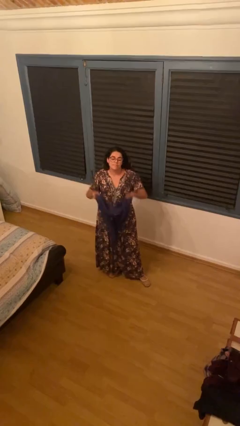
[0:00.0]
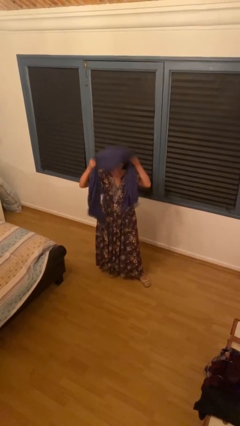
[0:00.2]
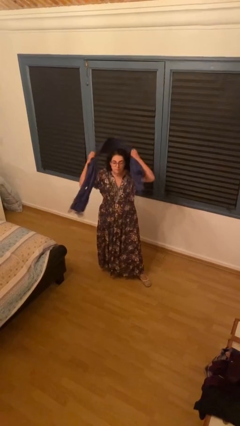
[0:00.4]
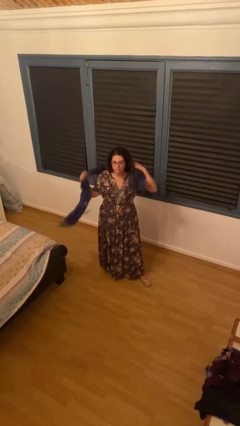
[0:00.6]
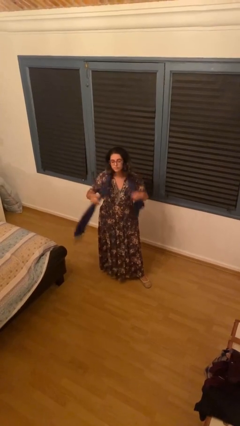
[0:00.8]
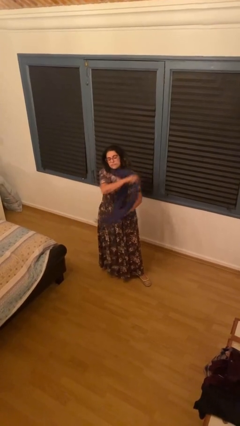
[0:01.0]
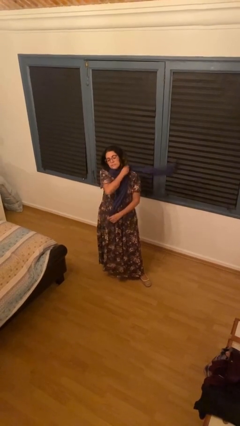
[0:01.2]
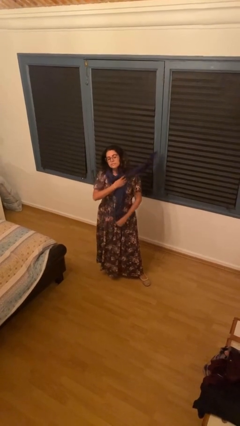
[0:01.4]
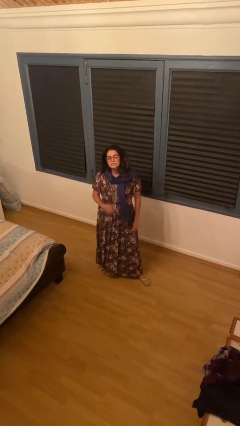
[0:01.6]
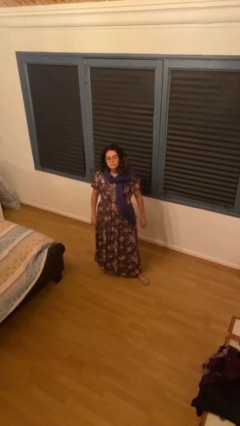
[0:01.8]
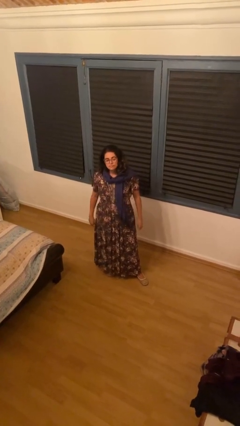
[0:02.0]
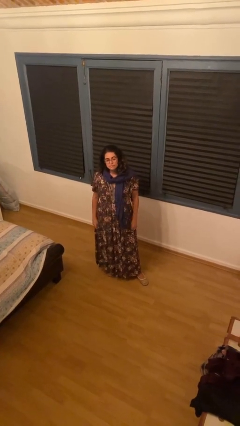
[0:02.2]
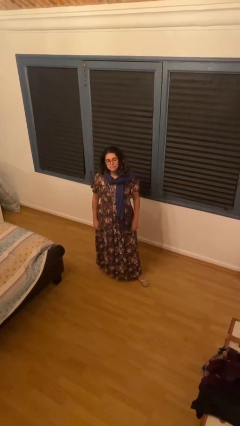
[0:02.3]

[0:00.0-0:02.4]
person puts on scarf

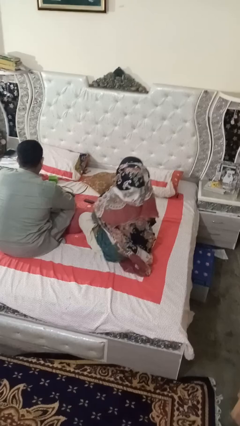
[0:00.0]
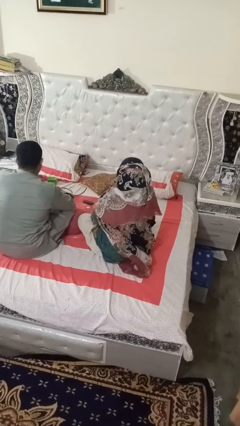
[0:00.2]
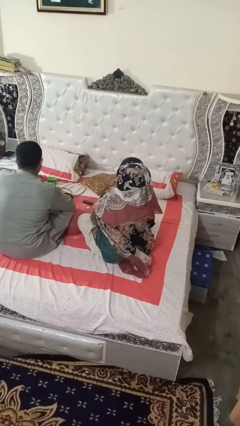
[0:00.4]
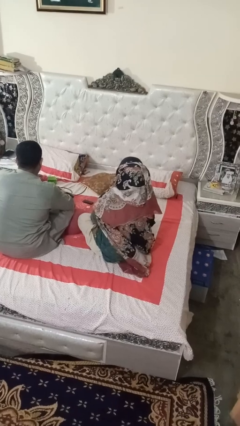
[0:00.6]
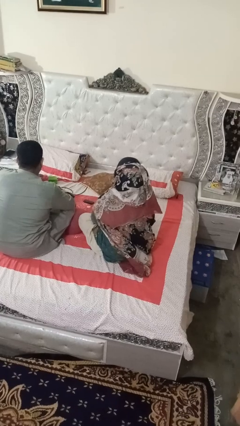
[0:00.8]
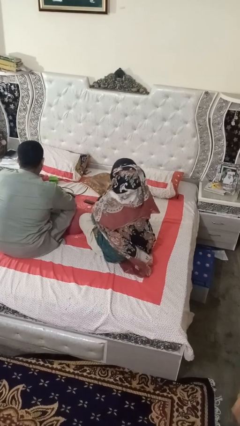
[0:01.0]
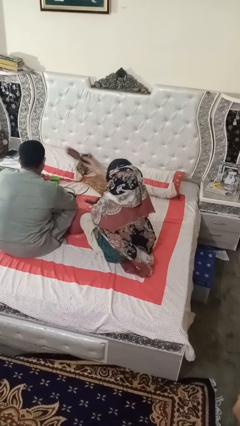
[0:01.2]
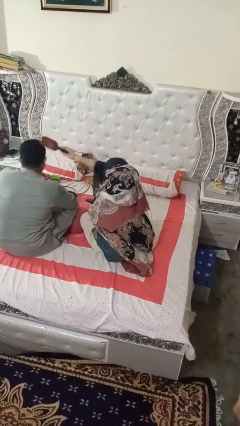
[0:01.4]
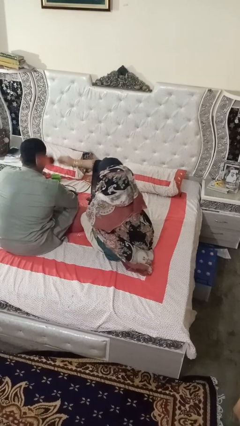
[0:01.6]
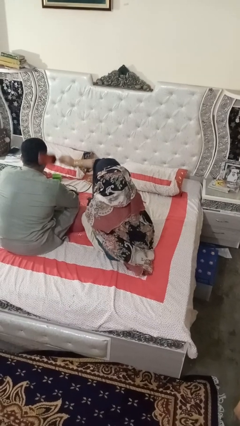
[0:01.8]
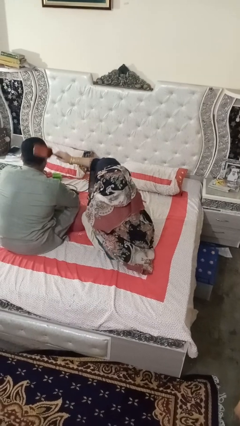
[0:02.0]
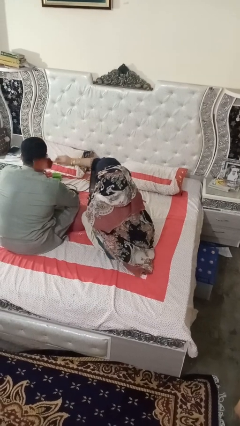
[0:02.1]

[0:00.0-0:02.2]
person brushes hair of person

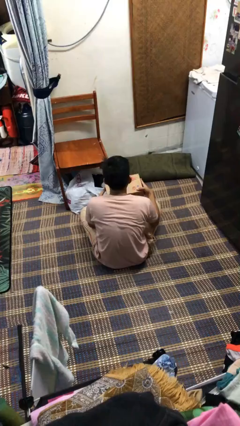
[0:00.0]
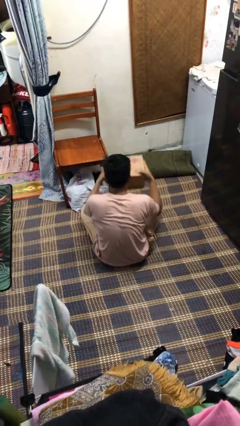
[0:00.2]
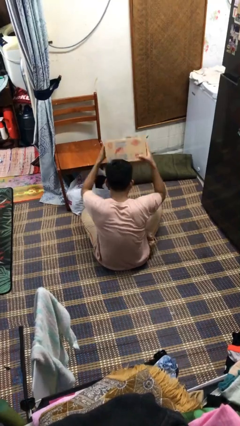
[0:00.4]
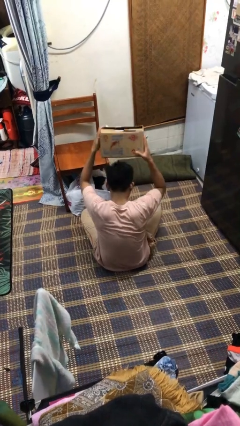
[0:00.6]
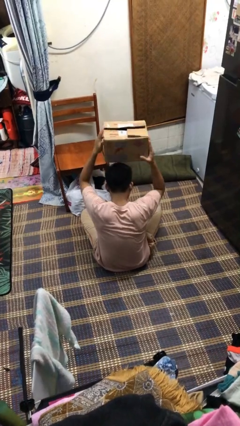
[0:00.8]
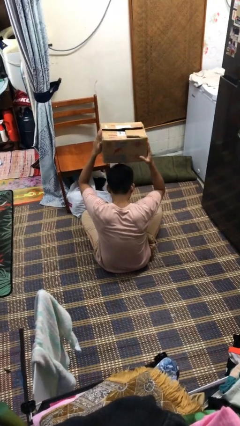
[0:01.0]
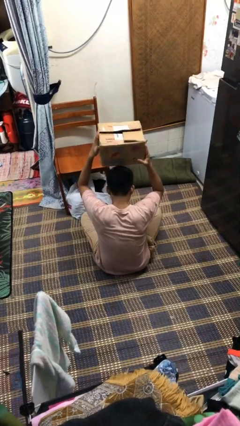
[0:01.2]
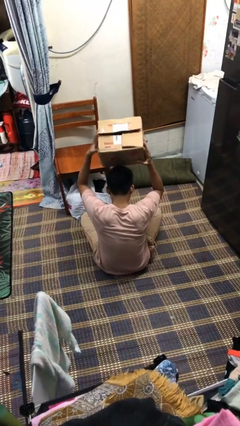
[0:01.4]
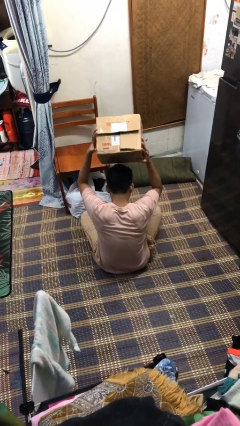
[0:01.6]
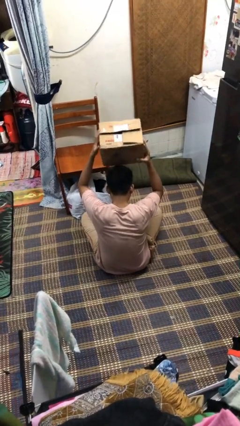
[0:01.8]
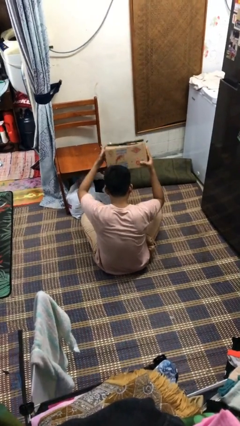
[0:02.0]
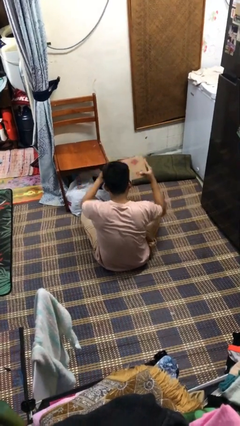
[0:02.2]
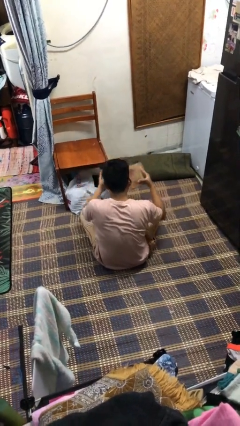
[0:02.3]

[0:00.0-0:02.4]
person holds object above head

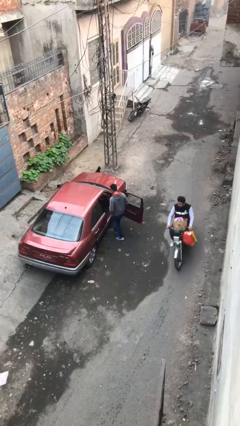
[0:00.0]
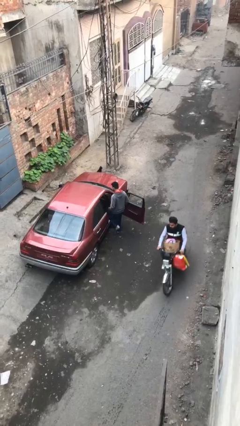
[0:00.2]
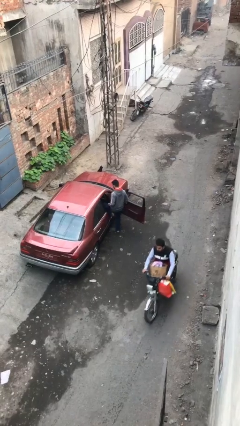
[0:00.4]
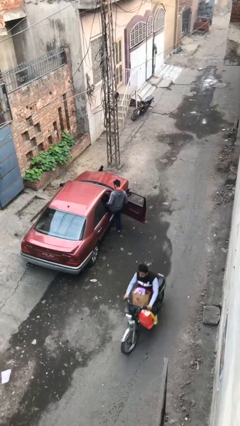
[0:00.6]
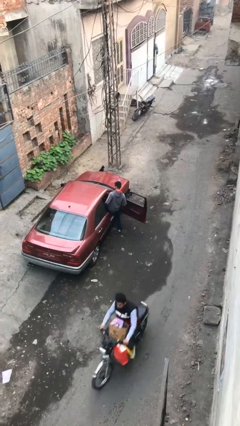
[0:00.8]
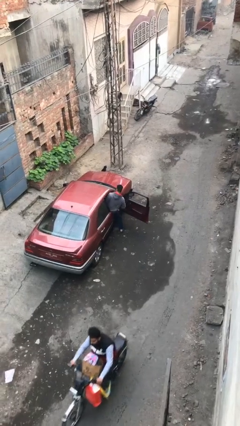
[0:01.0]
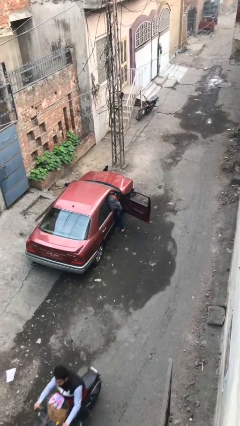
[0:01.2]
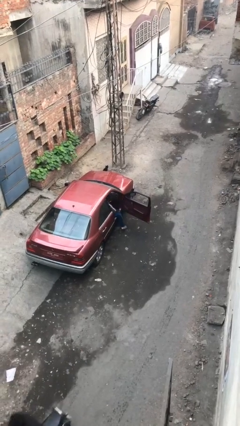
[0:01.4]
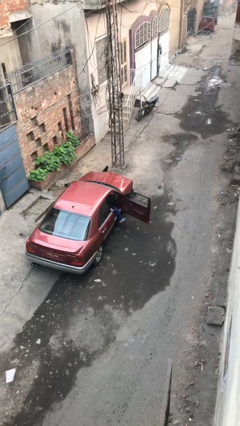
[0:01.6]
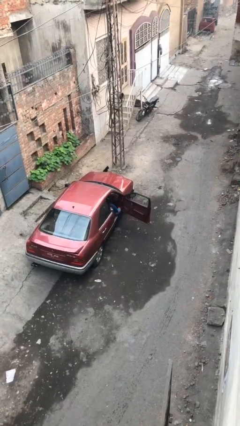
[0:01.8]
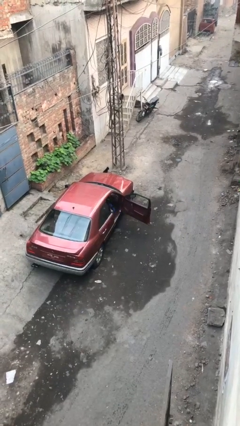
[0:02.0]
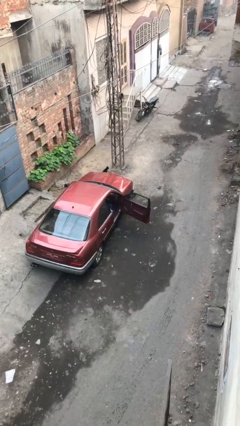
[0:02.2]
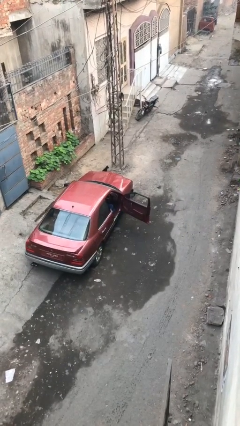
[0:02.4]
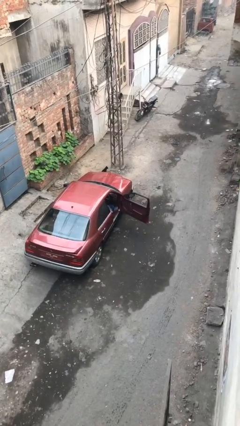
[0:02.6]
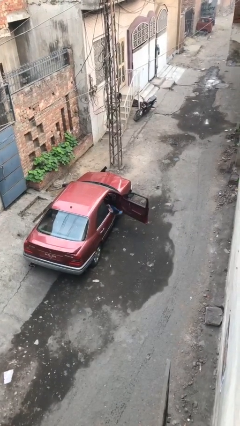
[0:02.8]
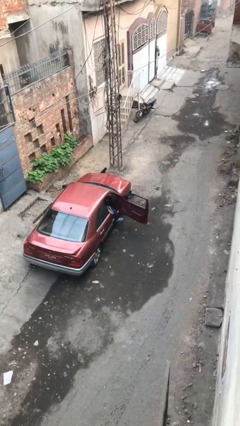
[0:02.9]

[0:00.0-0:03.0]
person enters car

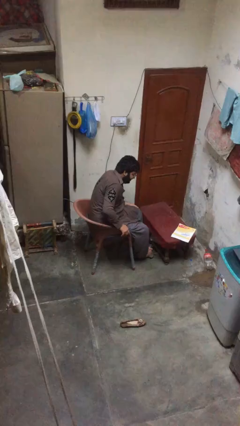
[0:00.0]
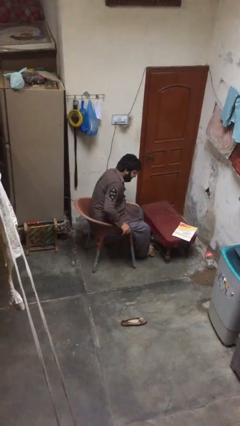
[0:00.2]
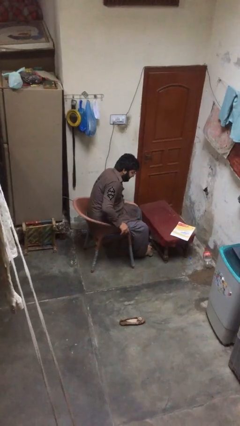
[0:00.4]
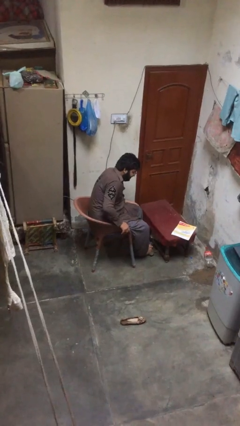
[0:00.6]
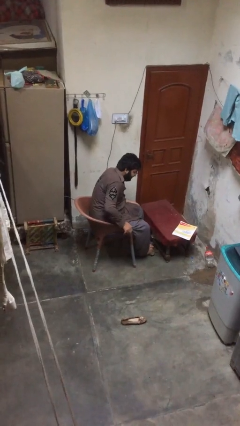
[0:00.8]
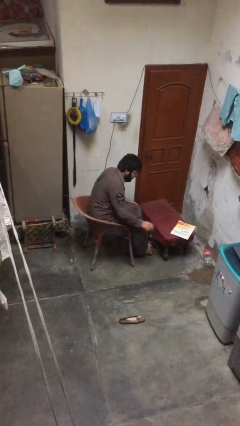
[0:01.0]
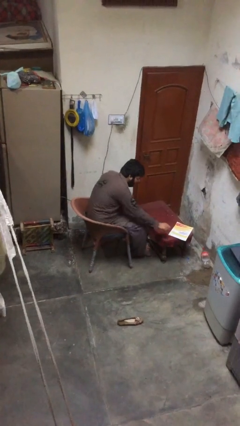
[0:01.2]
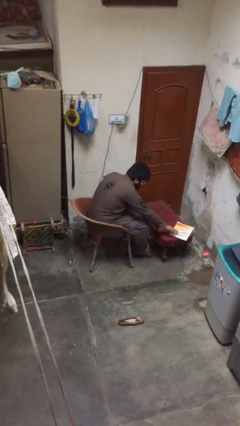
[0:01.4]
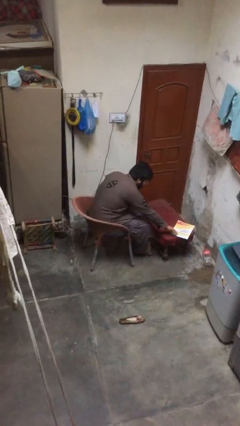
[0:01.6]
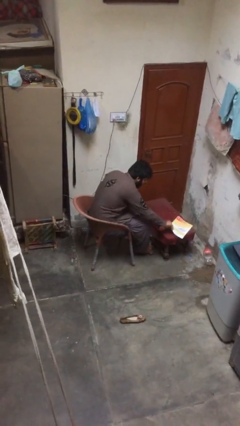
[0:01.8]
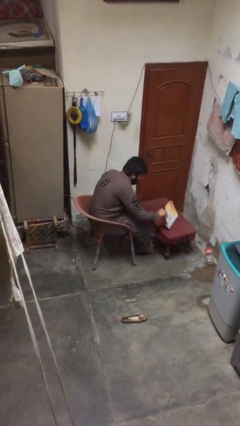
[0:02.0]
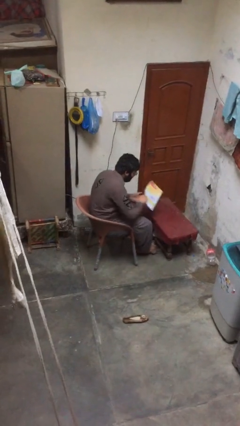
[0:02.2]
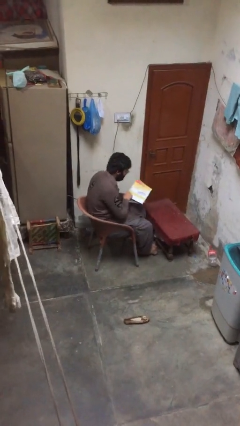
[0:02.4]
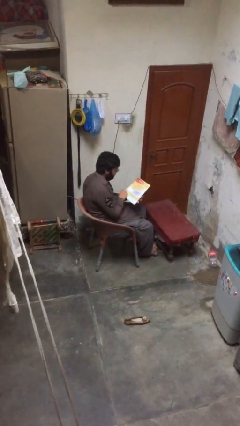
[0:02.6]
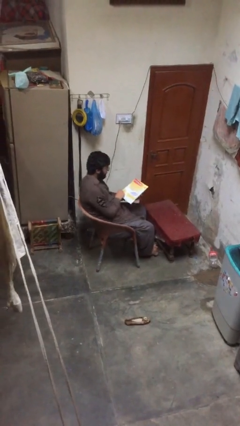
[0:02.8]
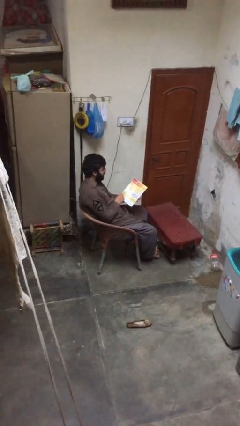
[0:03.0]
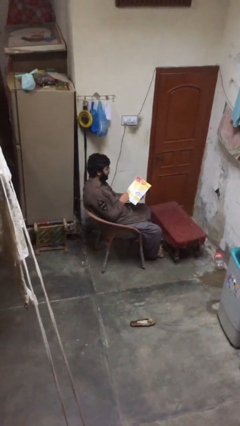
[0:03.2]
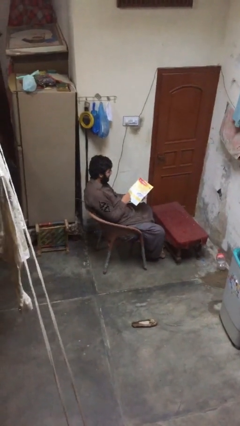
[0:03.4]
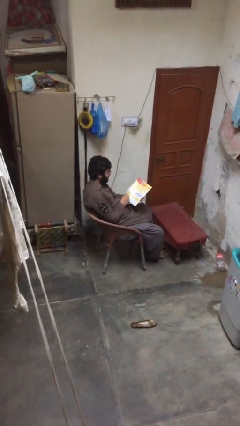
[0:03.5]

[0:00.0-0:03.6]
person picks up object from table

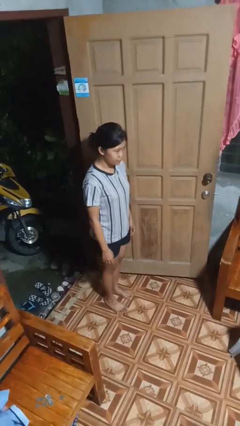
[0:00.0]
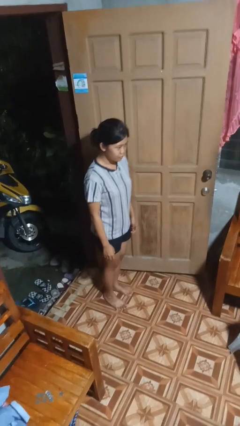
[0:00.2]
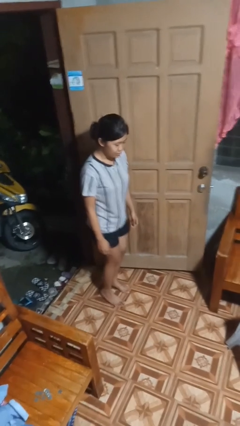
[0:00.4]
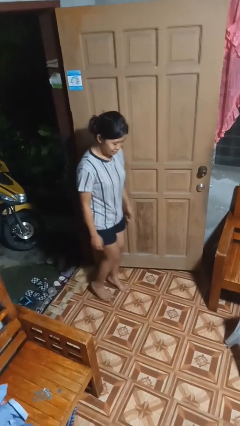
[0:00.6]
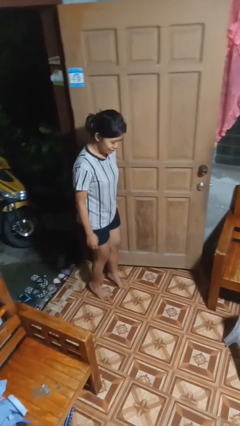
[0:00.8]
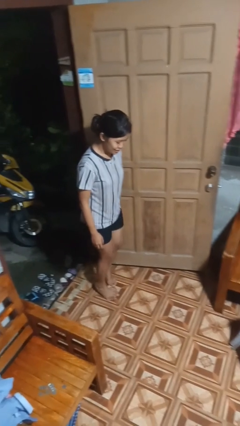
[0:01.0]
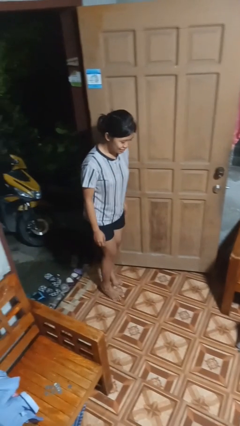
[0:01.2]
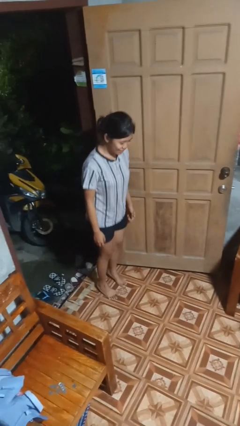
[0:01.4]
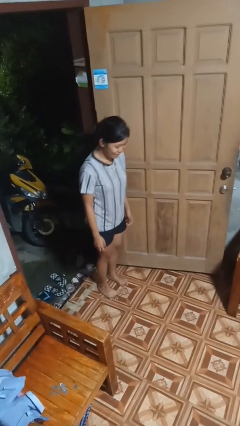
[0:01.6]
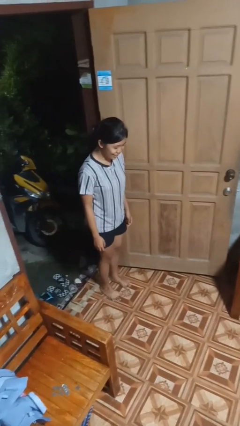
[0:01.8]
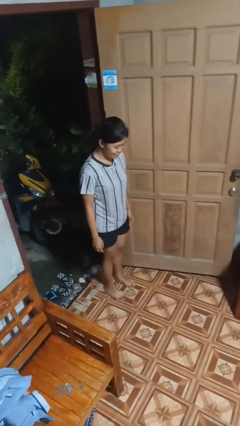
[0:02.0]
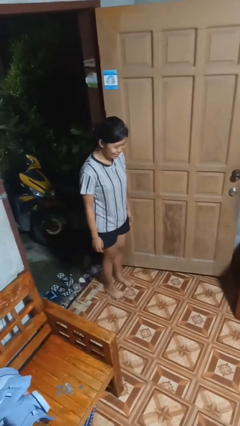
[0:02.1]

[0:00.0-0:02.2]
person walks tiptoe

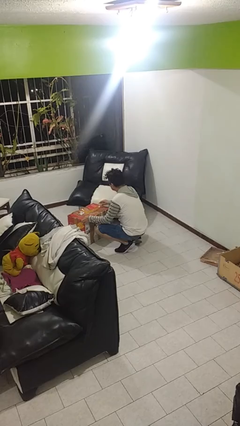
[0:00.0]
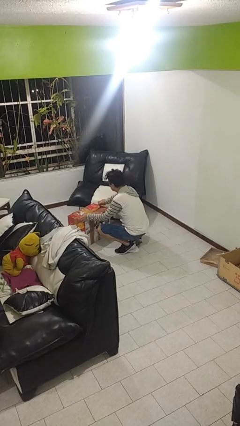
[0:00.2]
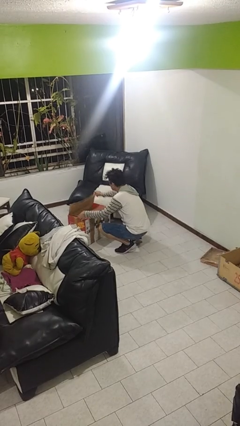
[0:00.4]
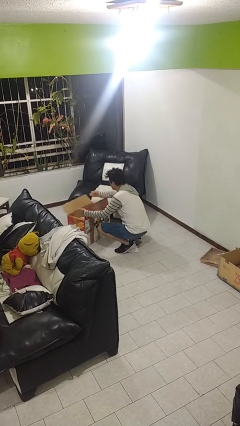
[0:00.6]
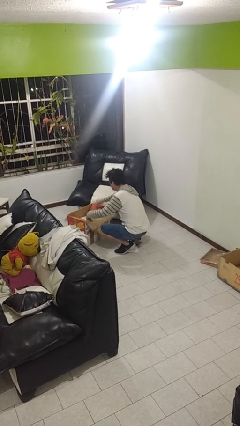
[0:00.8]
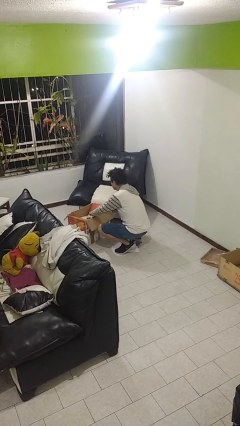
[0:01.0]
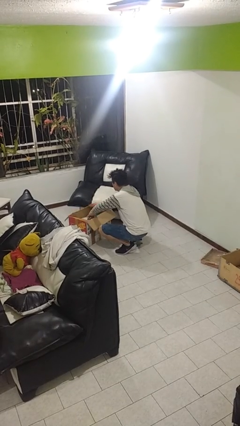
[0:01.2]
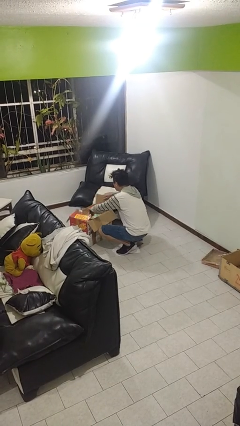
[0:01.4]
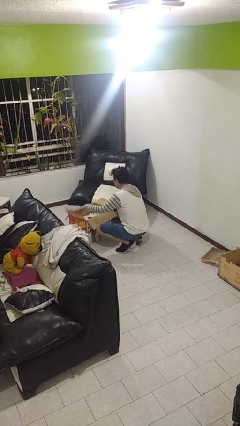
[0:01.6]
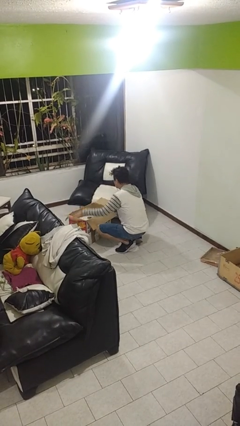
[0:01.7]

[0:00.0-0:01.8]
person opens box
